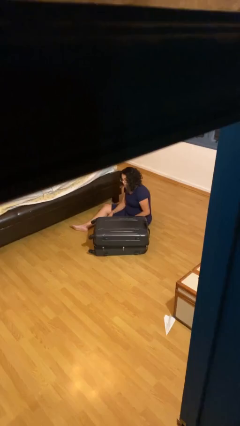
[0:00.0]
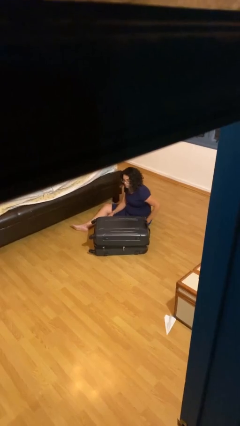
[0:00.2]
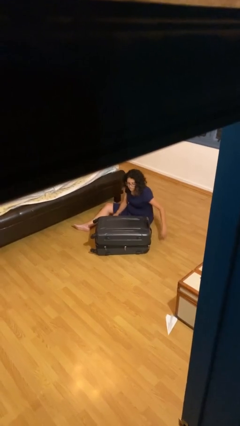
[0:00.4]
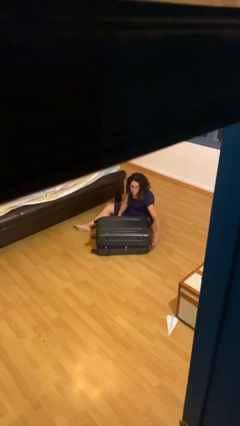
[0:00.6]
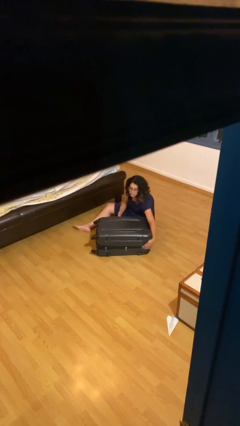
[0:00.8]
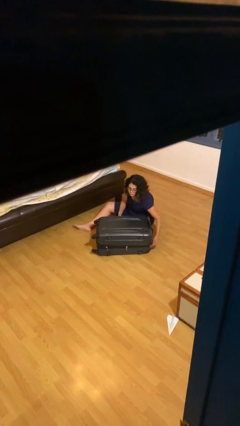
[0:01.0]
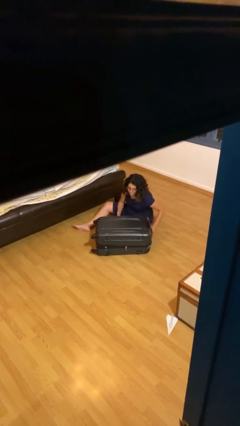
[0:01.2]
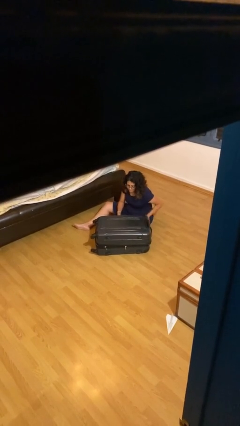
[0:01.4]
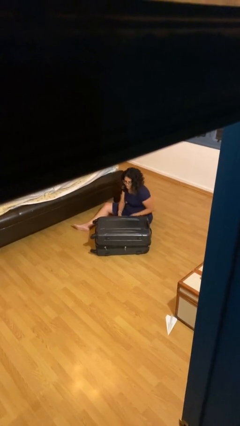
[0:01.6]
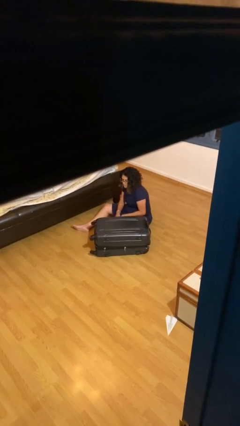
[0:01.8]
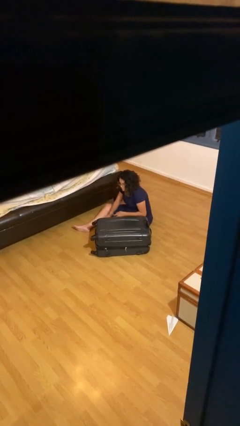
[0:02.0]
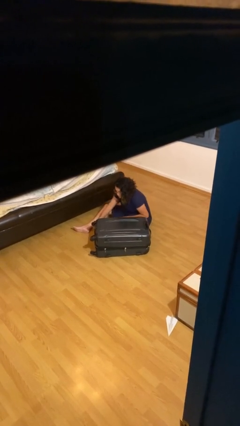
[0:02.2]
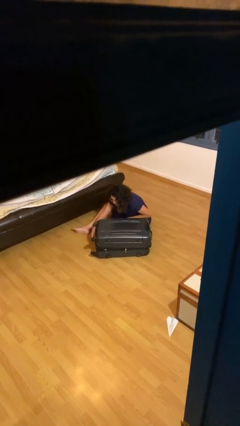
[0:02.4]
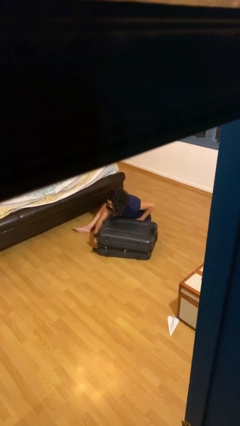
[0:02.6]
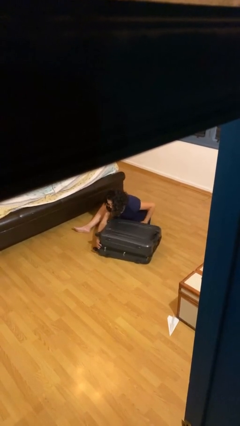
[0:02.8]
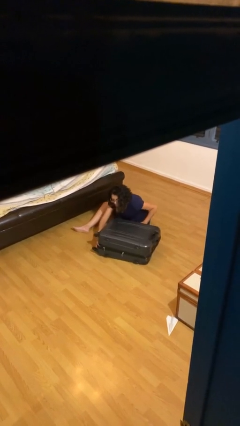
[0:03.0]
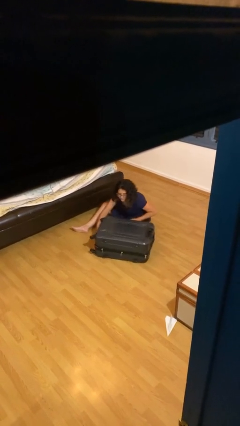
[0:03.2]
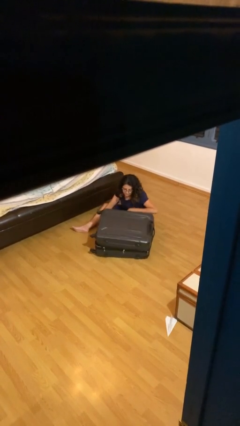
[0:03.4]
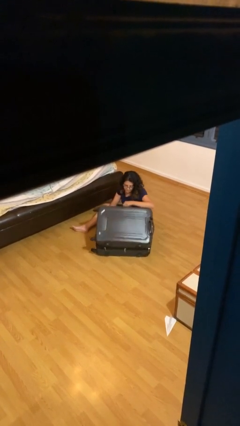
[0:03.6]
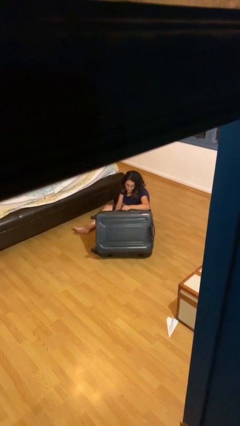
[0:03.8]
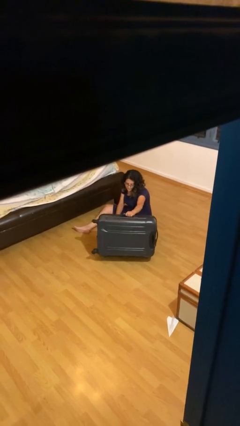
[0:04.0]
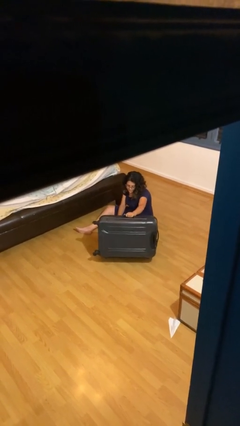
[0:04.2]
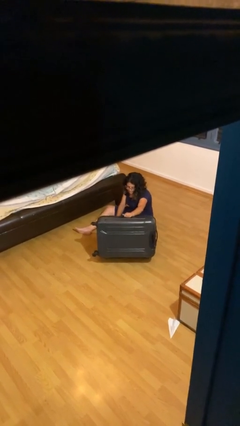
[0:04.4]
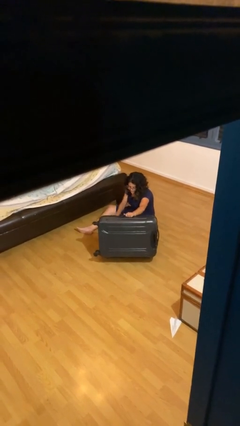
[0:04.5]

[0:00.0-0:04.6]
person opens suitcase

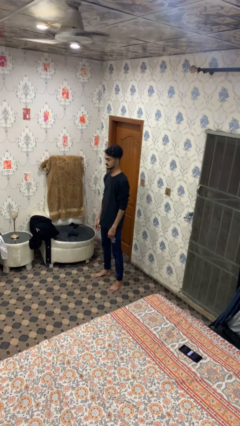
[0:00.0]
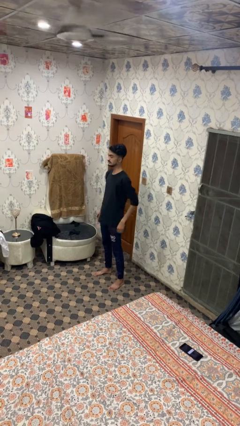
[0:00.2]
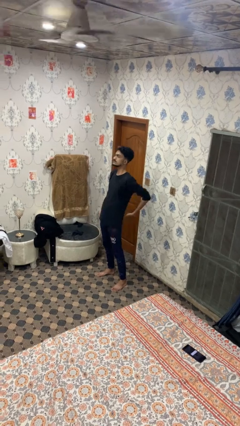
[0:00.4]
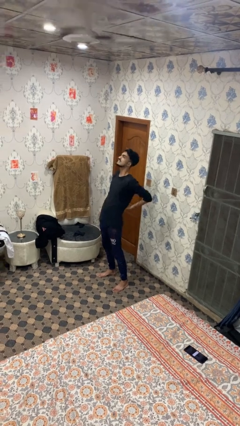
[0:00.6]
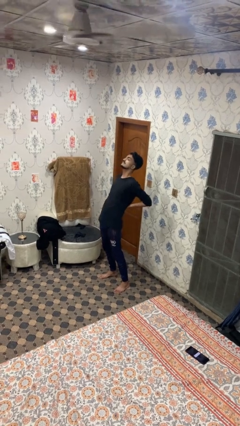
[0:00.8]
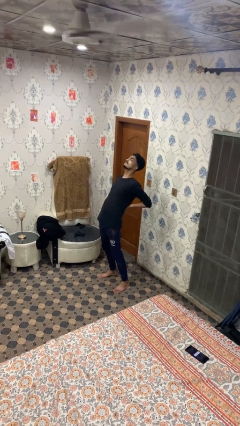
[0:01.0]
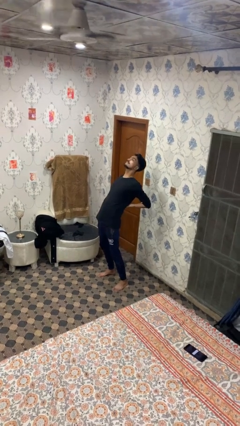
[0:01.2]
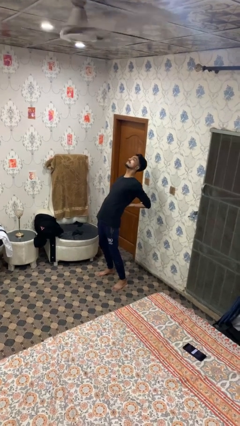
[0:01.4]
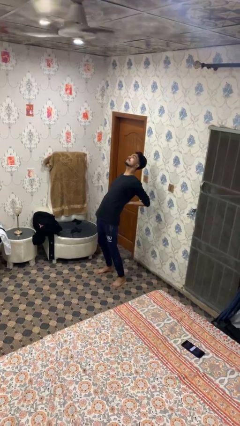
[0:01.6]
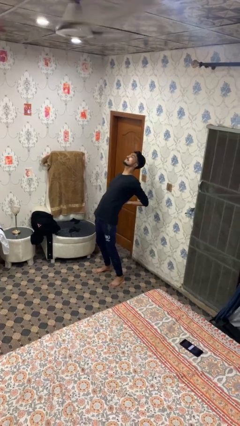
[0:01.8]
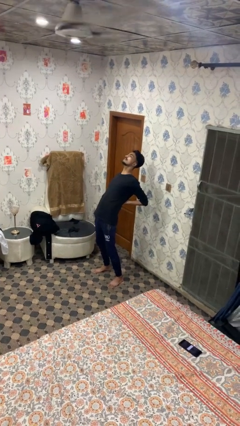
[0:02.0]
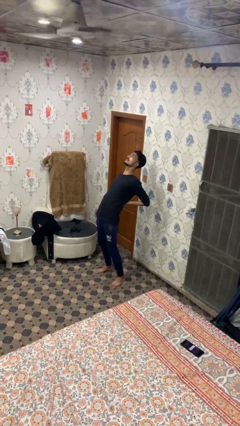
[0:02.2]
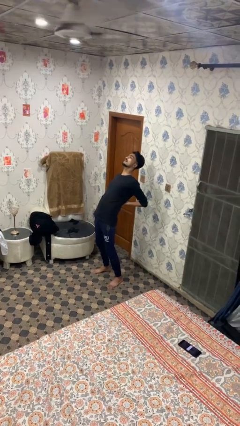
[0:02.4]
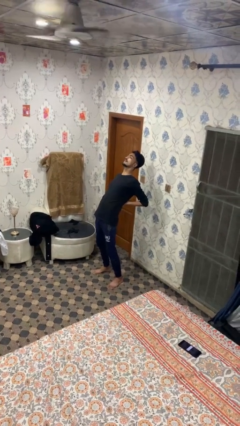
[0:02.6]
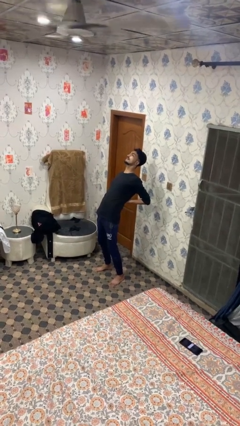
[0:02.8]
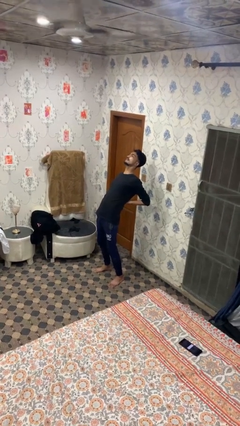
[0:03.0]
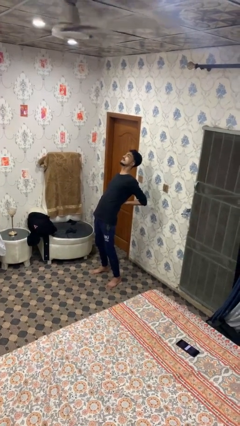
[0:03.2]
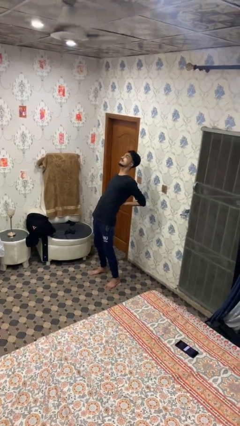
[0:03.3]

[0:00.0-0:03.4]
person stretches back

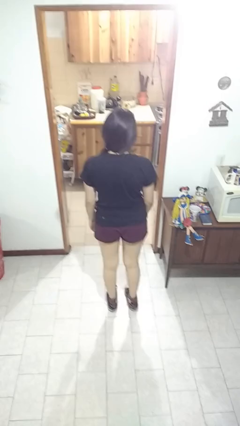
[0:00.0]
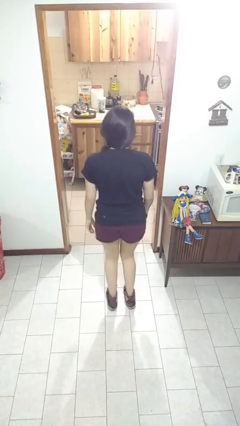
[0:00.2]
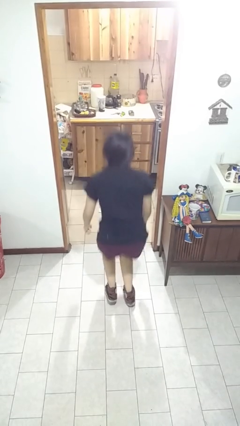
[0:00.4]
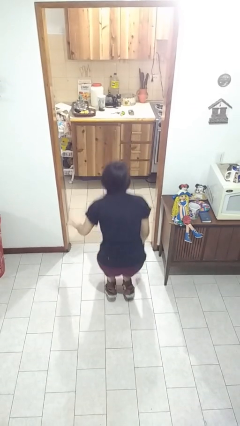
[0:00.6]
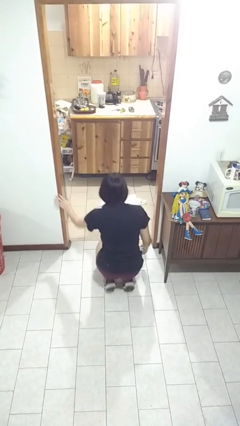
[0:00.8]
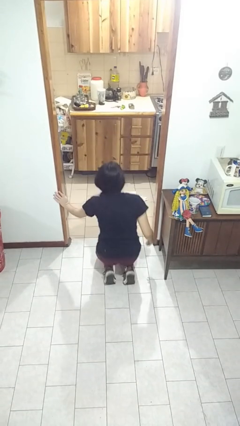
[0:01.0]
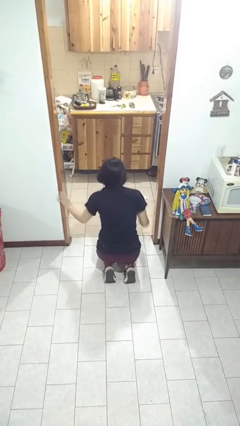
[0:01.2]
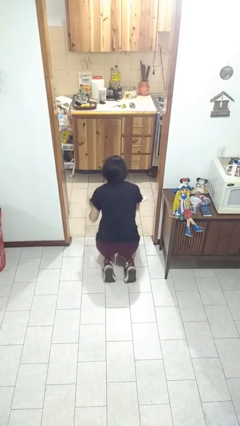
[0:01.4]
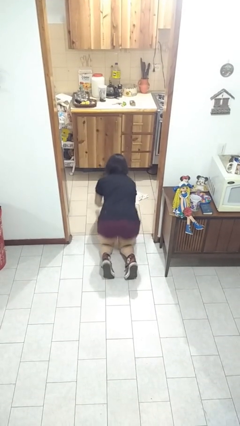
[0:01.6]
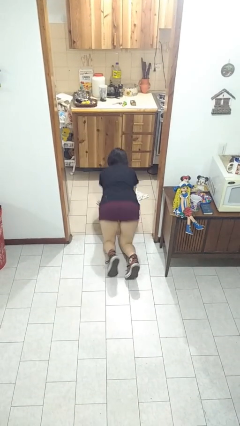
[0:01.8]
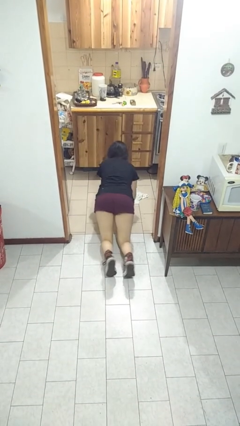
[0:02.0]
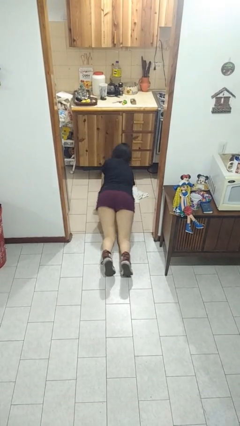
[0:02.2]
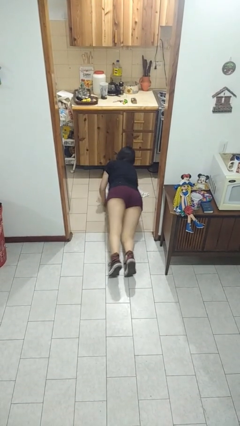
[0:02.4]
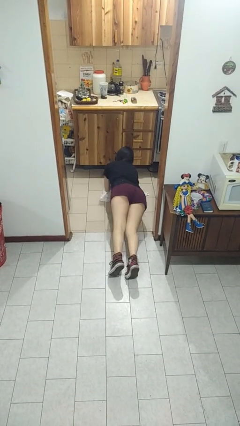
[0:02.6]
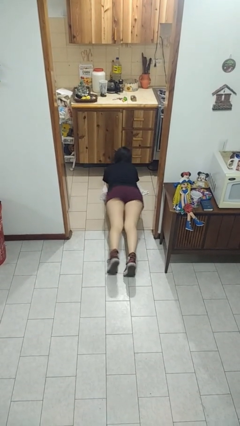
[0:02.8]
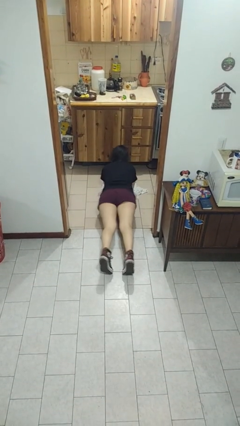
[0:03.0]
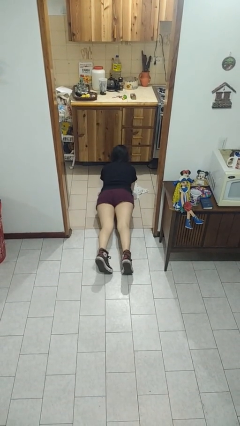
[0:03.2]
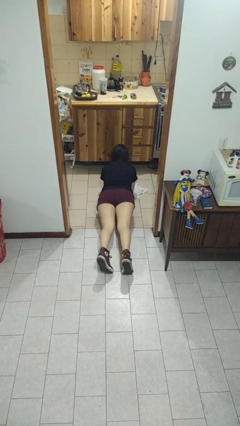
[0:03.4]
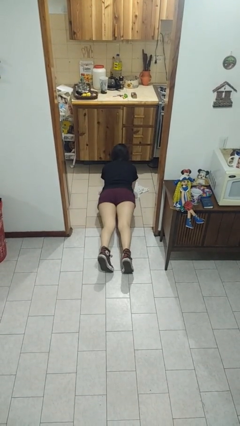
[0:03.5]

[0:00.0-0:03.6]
person exercises with plank

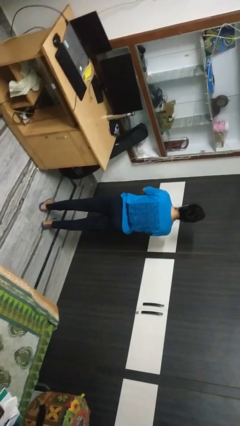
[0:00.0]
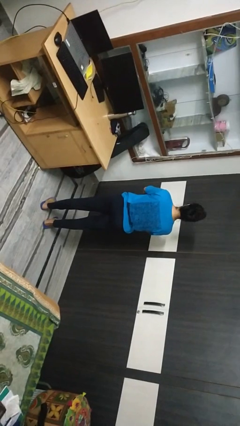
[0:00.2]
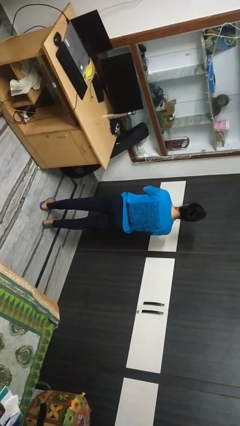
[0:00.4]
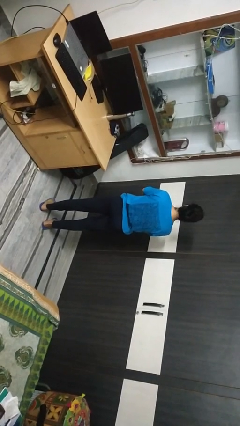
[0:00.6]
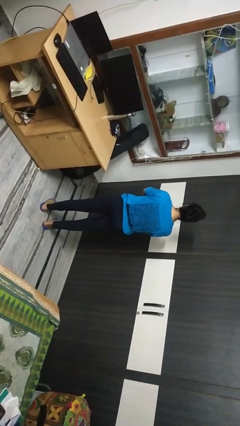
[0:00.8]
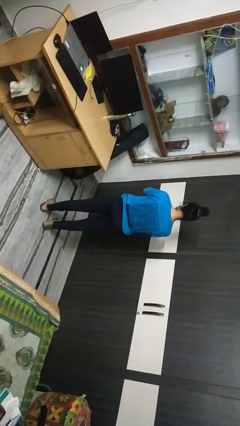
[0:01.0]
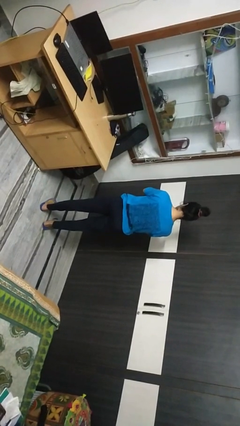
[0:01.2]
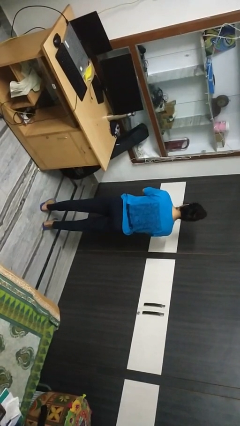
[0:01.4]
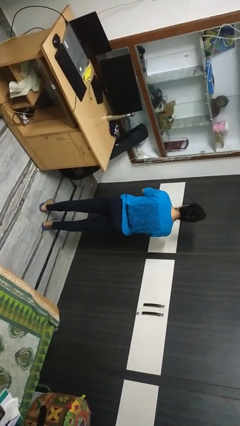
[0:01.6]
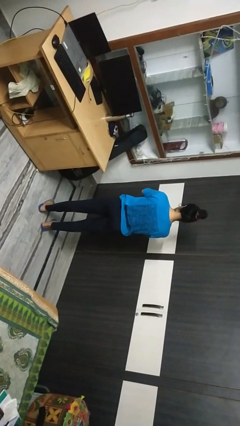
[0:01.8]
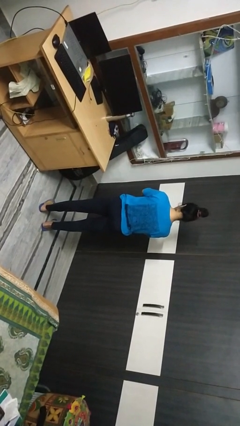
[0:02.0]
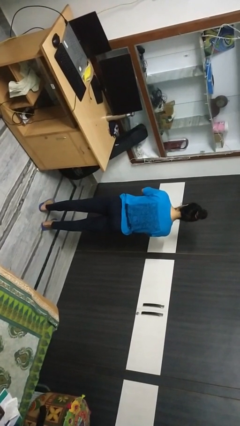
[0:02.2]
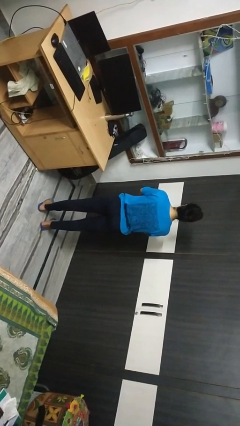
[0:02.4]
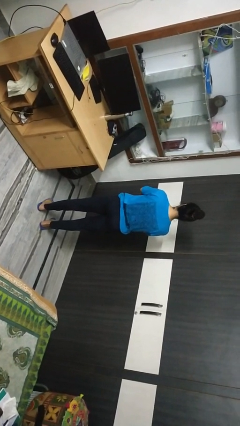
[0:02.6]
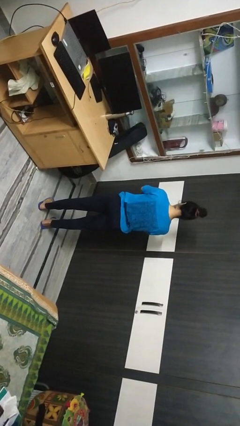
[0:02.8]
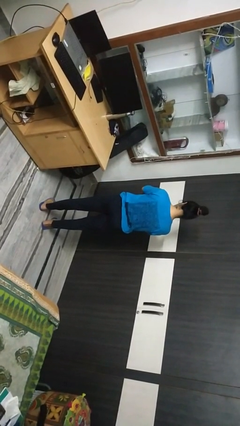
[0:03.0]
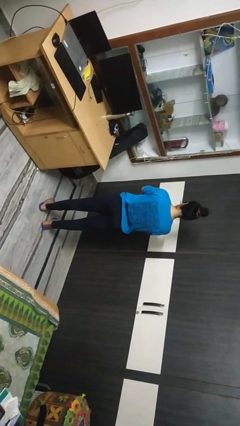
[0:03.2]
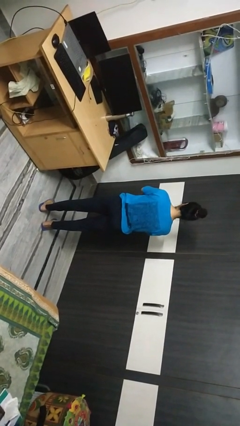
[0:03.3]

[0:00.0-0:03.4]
person nods head

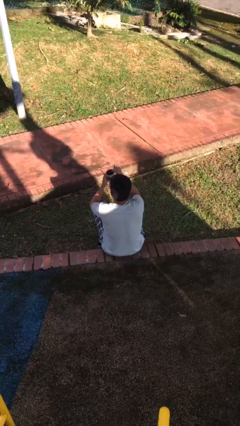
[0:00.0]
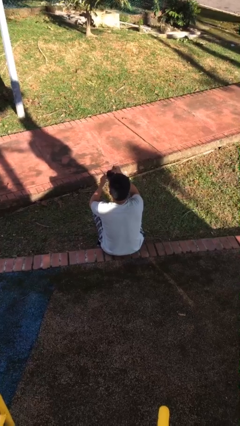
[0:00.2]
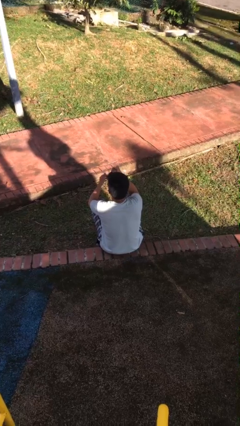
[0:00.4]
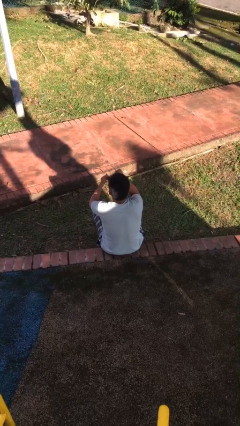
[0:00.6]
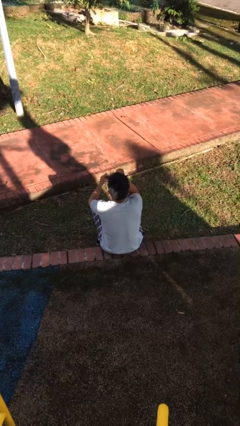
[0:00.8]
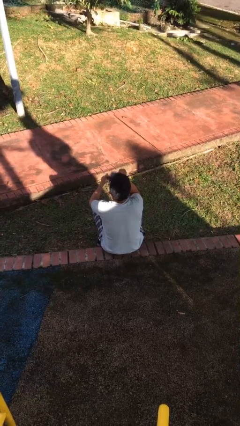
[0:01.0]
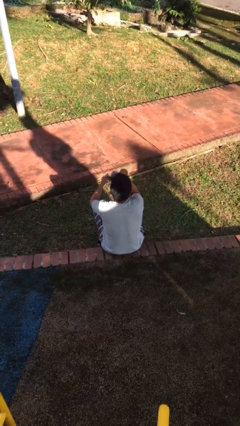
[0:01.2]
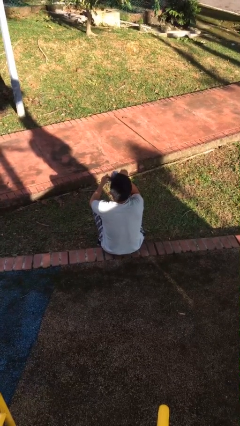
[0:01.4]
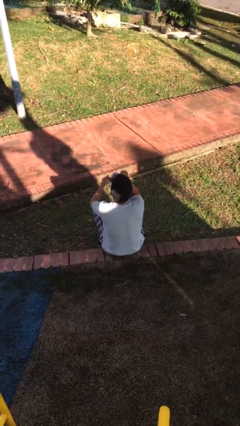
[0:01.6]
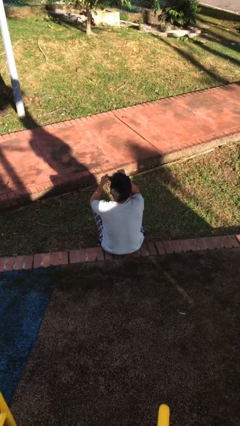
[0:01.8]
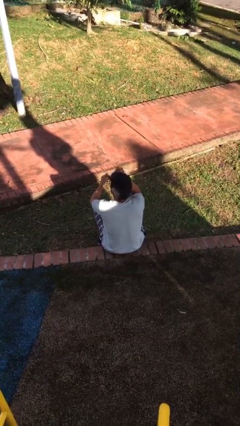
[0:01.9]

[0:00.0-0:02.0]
person drinks from mug

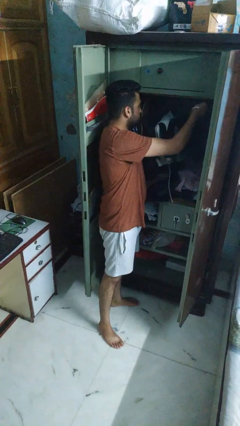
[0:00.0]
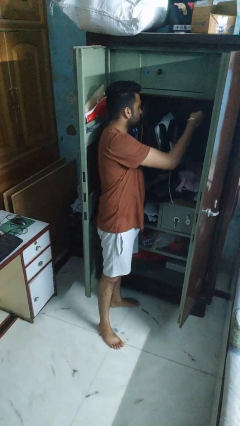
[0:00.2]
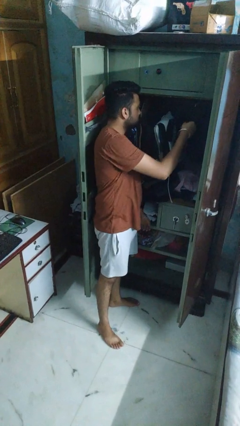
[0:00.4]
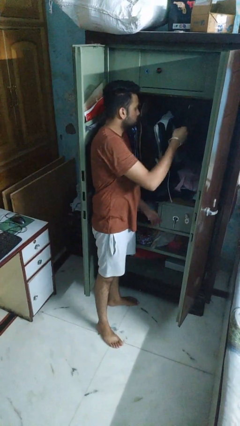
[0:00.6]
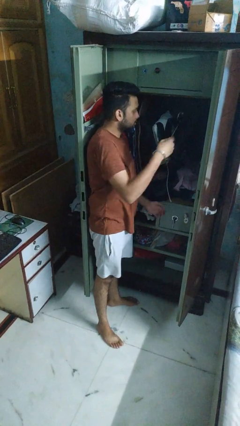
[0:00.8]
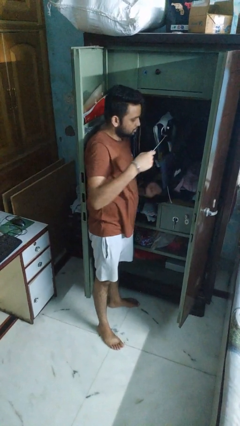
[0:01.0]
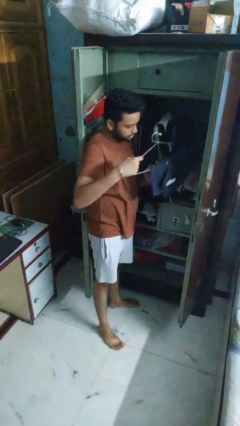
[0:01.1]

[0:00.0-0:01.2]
person takes clothes from closet
